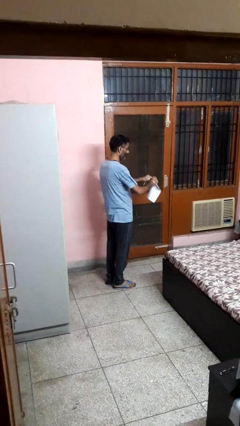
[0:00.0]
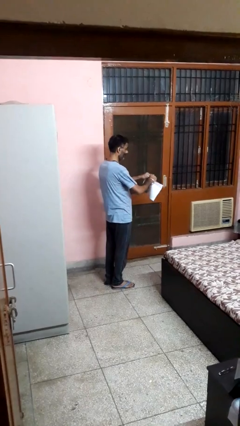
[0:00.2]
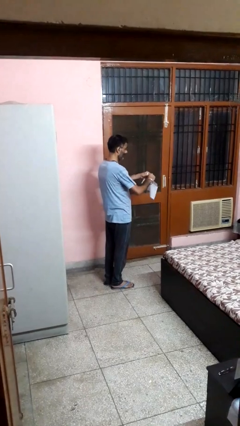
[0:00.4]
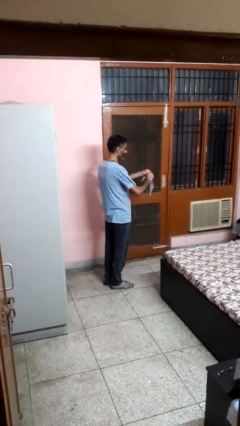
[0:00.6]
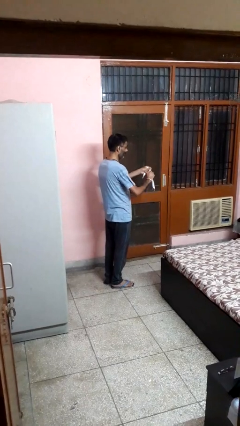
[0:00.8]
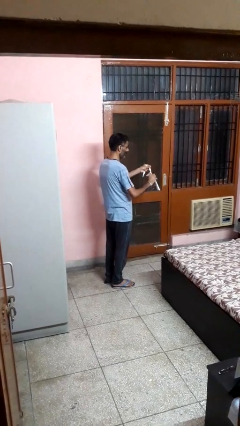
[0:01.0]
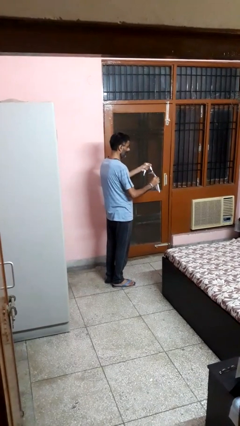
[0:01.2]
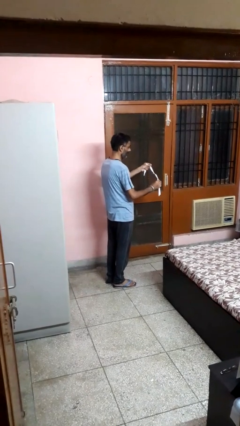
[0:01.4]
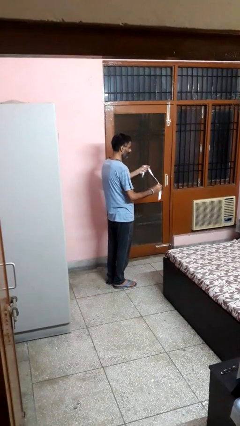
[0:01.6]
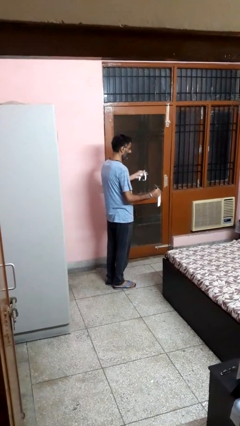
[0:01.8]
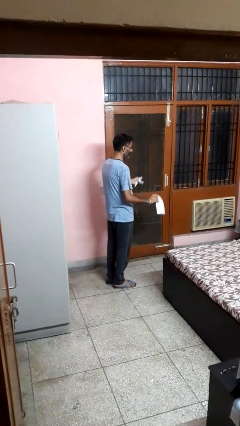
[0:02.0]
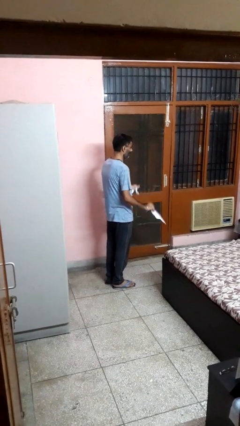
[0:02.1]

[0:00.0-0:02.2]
person tears paper

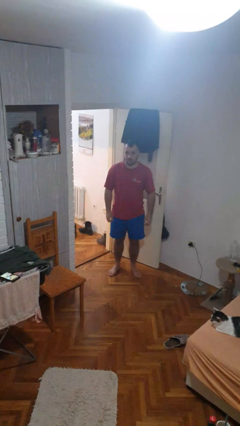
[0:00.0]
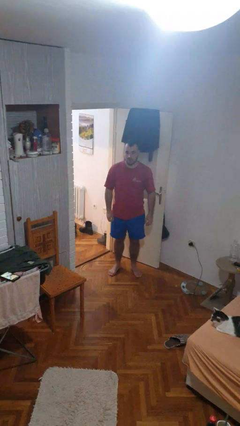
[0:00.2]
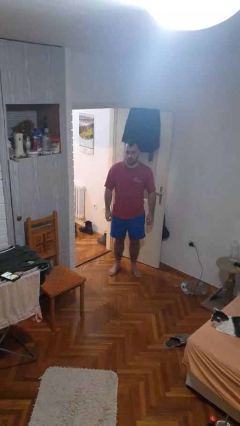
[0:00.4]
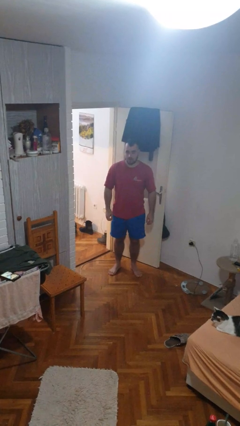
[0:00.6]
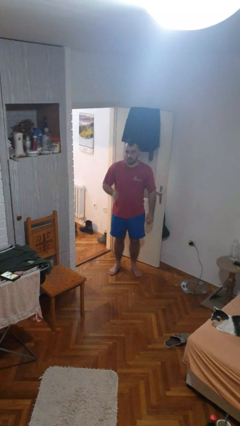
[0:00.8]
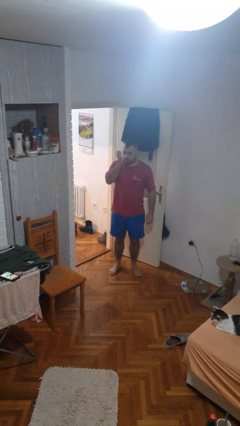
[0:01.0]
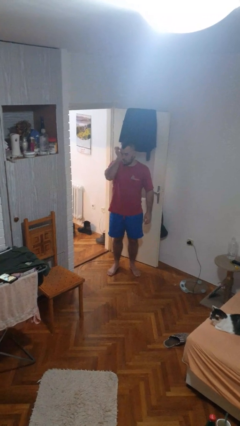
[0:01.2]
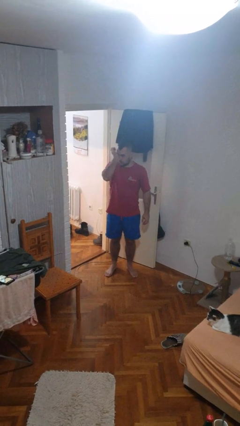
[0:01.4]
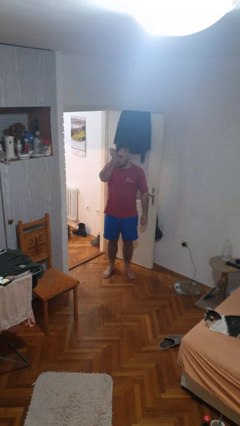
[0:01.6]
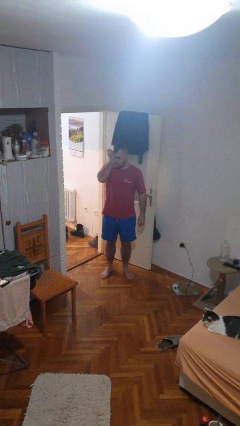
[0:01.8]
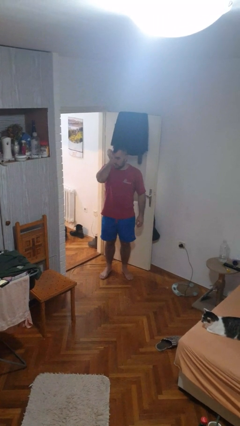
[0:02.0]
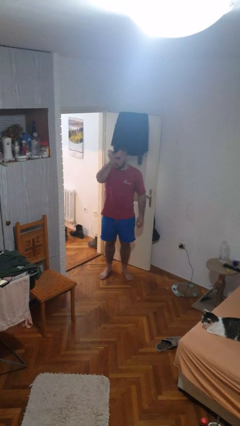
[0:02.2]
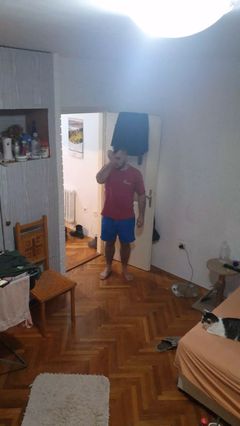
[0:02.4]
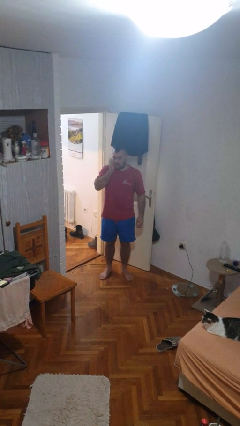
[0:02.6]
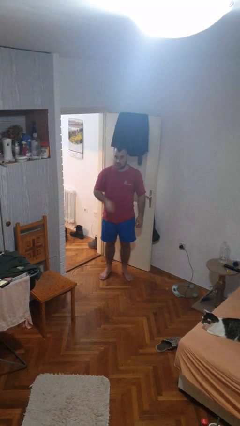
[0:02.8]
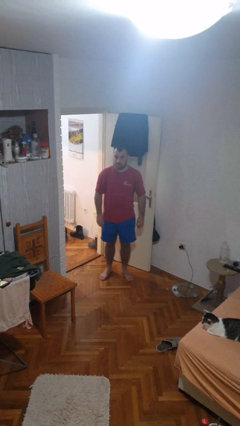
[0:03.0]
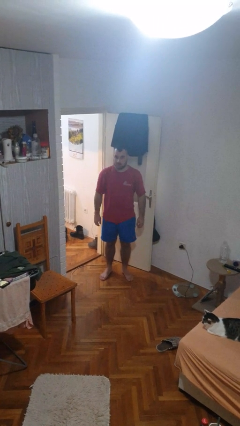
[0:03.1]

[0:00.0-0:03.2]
person rubs eyes

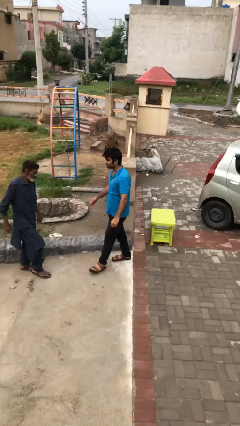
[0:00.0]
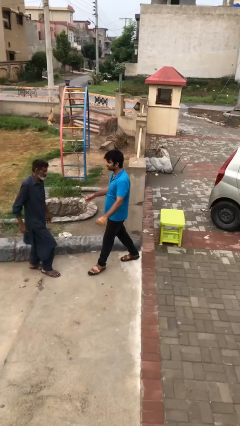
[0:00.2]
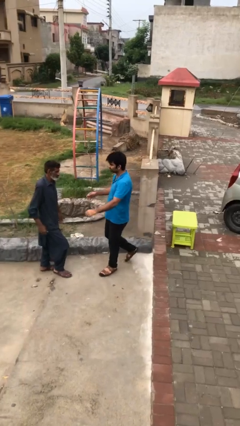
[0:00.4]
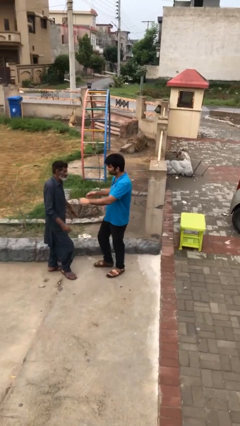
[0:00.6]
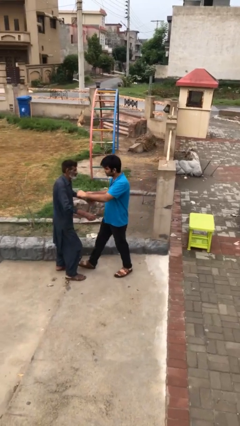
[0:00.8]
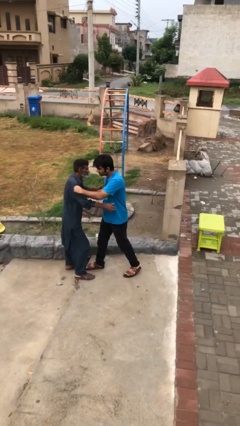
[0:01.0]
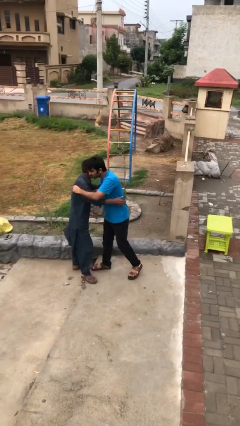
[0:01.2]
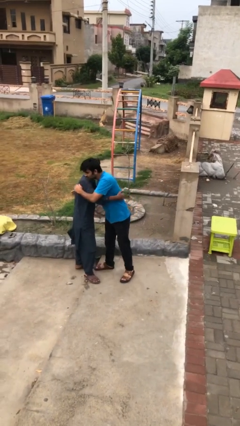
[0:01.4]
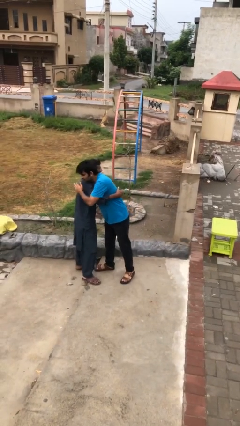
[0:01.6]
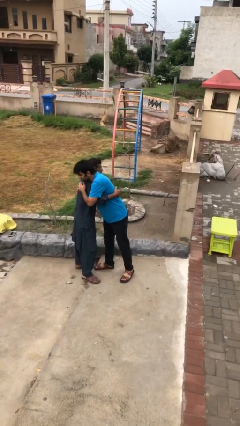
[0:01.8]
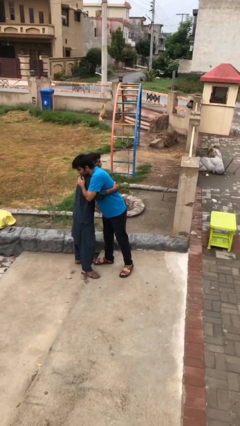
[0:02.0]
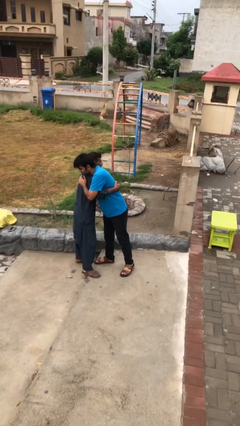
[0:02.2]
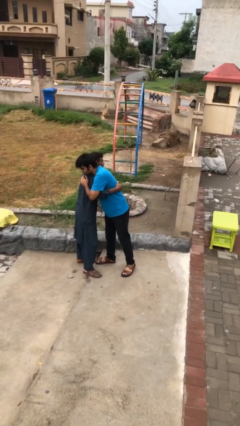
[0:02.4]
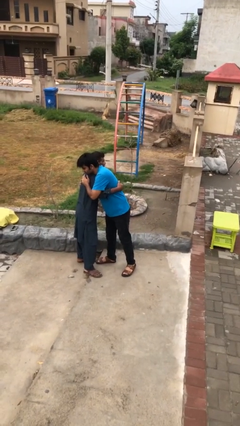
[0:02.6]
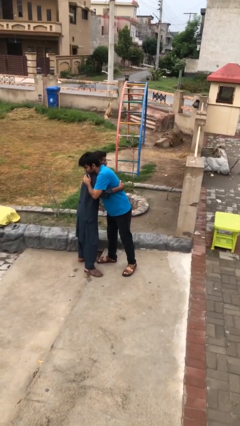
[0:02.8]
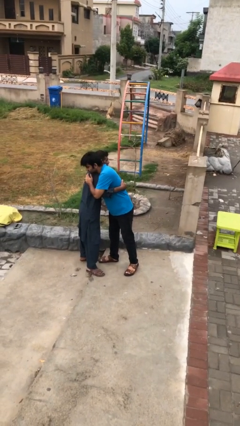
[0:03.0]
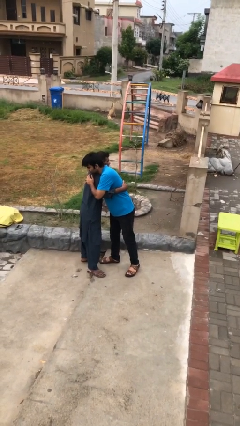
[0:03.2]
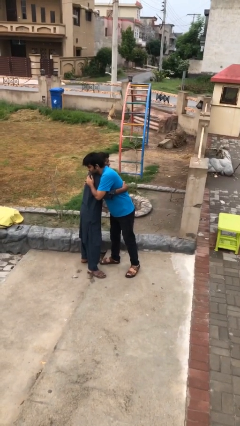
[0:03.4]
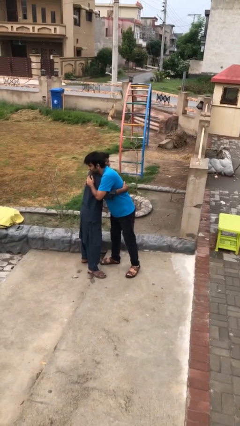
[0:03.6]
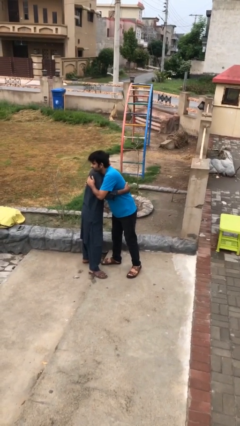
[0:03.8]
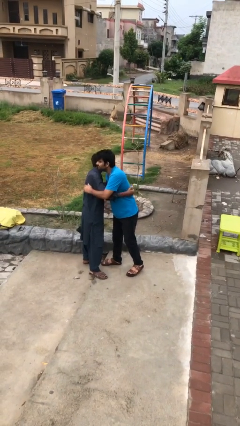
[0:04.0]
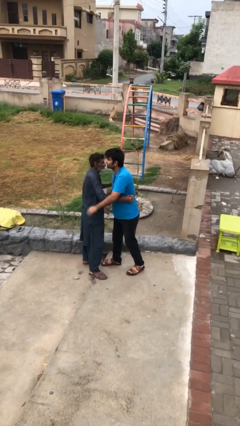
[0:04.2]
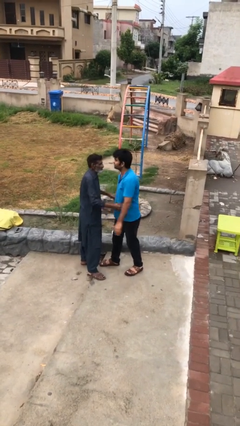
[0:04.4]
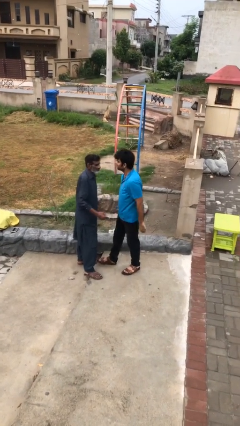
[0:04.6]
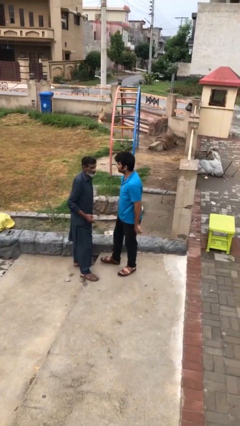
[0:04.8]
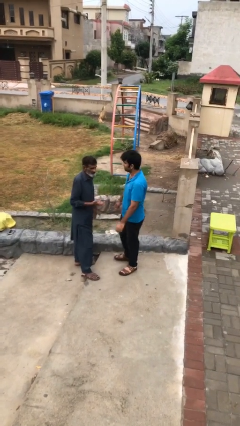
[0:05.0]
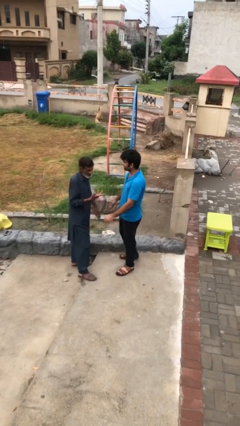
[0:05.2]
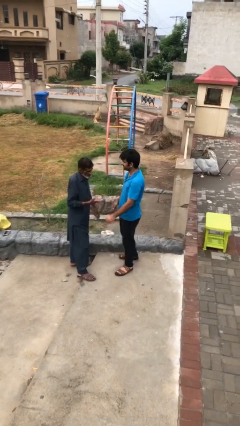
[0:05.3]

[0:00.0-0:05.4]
person embraces person

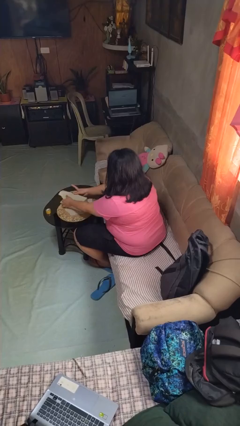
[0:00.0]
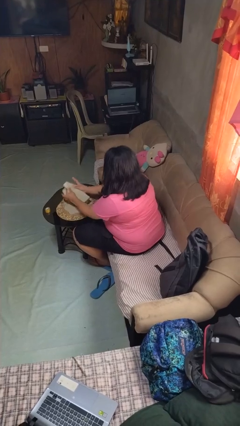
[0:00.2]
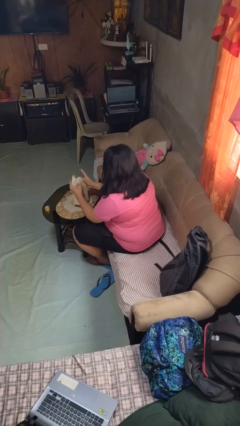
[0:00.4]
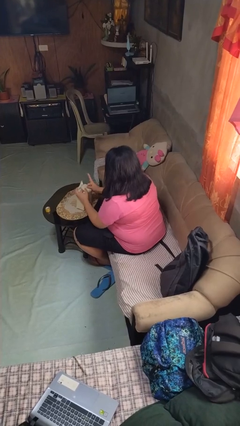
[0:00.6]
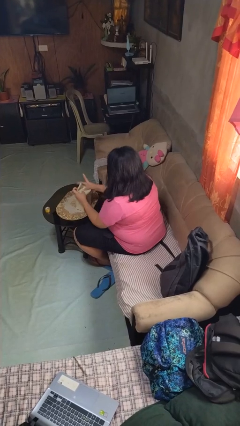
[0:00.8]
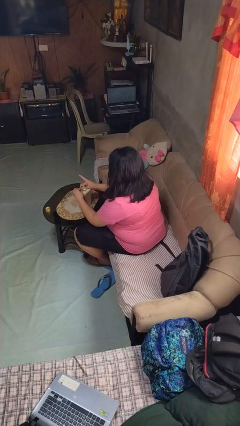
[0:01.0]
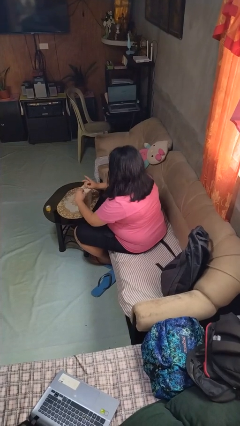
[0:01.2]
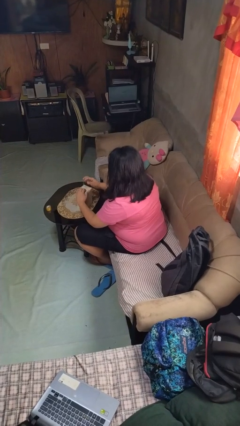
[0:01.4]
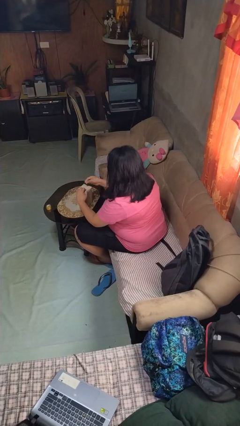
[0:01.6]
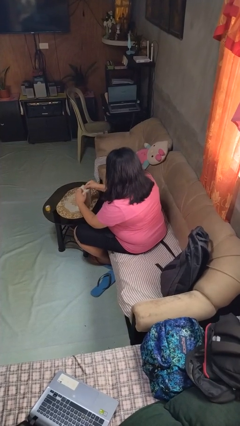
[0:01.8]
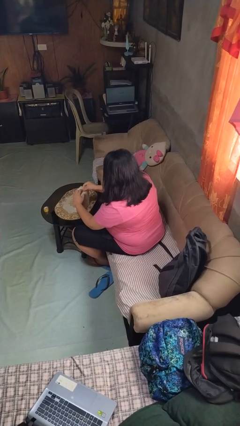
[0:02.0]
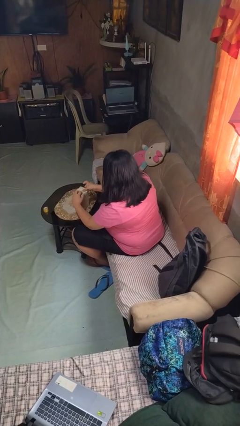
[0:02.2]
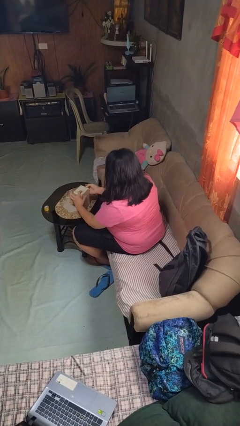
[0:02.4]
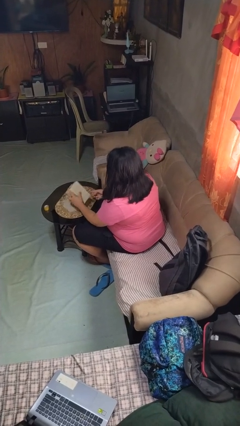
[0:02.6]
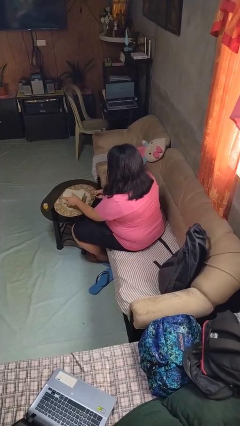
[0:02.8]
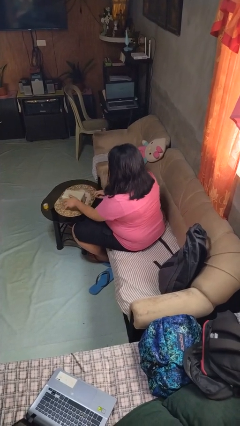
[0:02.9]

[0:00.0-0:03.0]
person wraps box

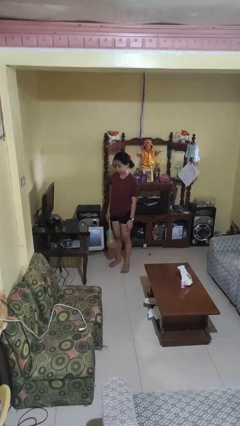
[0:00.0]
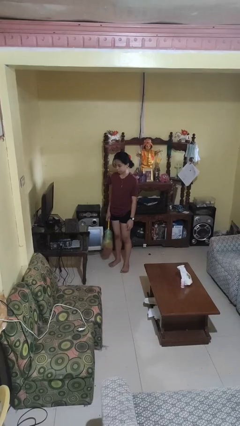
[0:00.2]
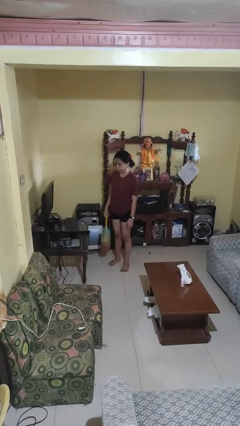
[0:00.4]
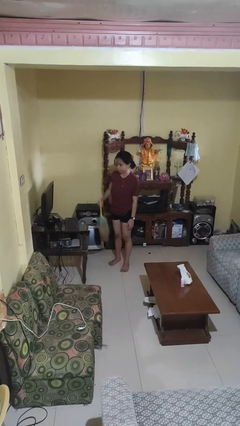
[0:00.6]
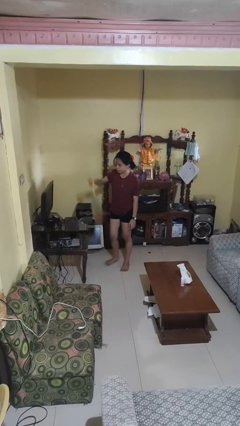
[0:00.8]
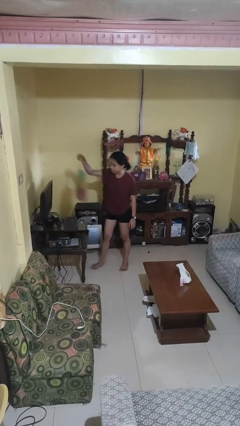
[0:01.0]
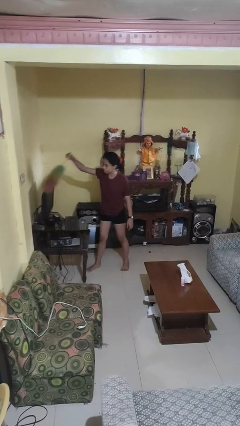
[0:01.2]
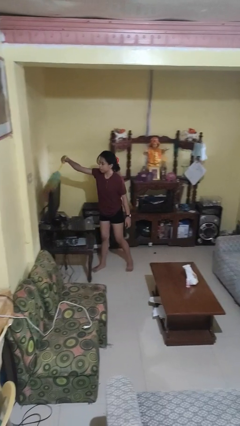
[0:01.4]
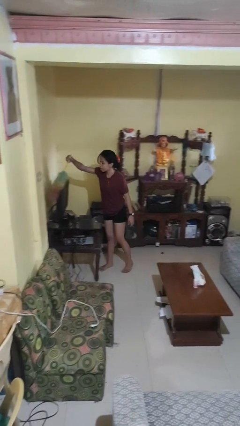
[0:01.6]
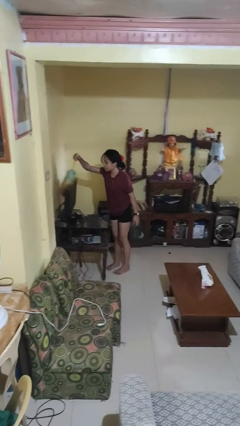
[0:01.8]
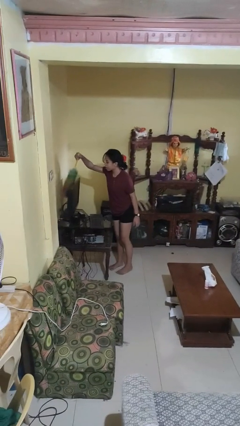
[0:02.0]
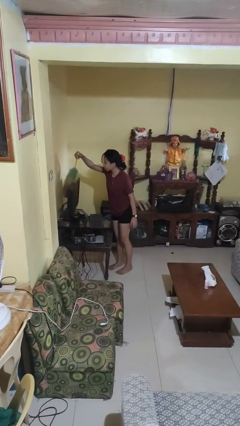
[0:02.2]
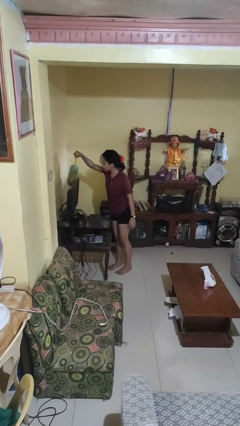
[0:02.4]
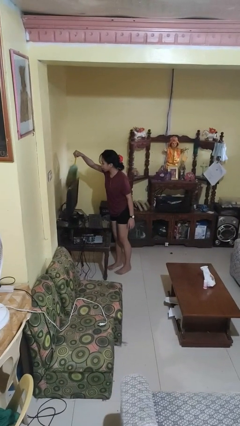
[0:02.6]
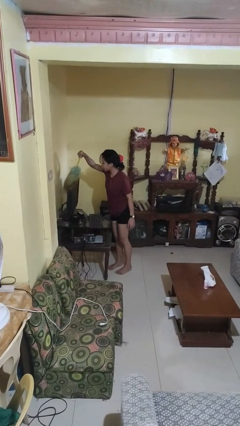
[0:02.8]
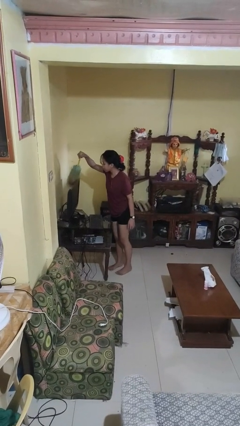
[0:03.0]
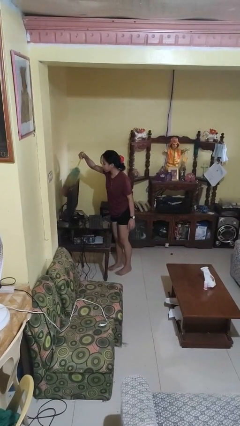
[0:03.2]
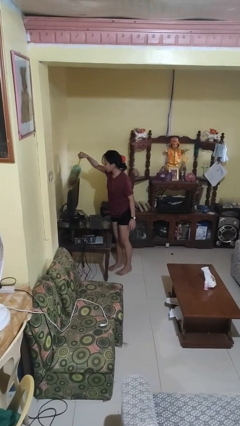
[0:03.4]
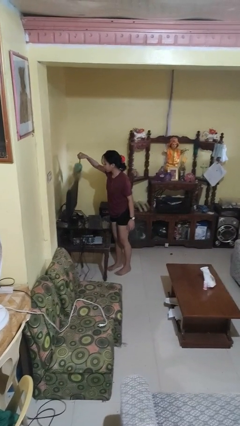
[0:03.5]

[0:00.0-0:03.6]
person dusts furniture
